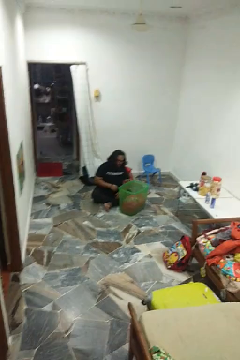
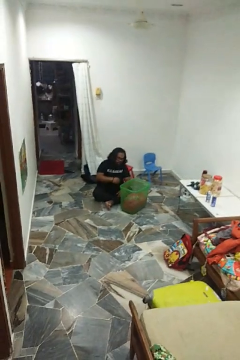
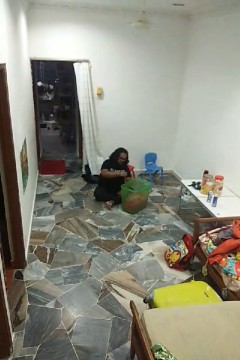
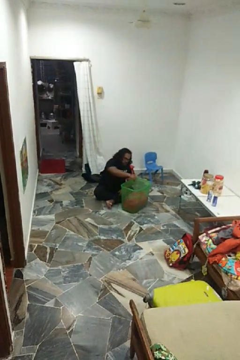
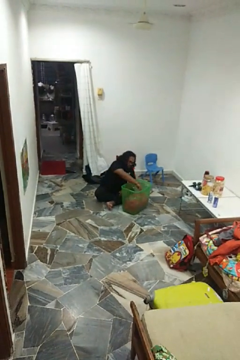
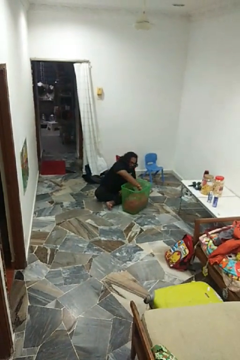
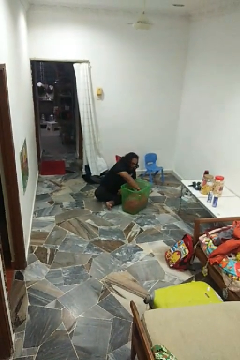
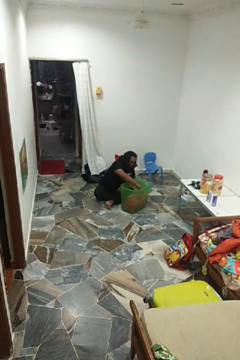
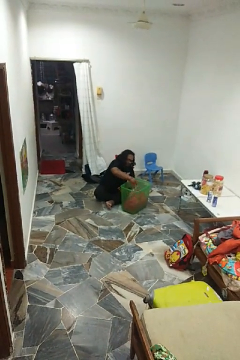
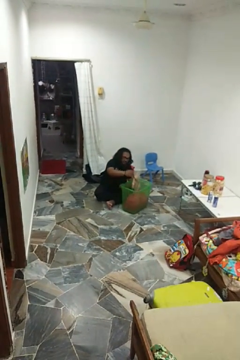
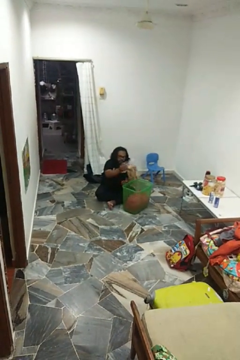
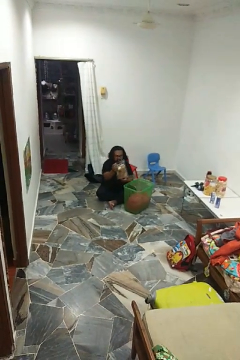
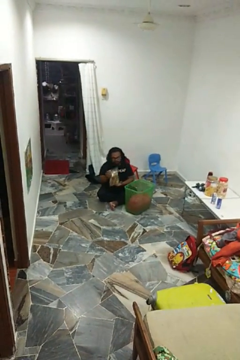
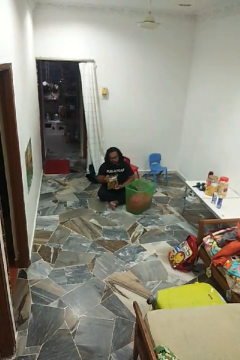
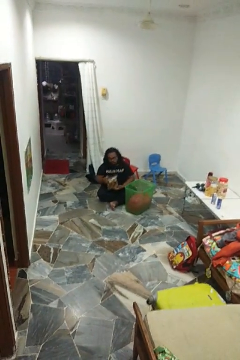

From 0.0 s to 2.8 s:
person takes object from basket

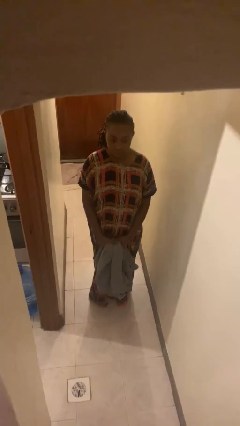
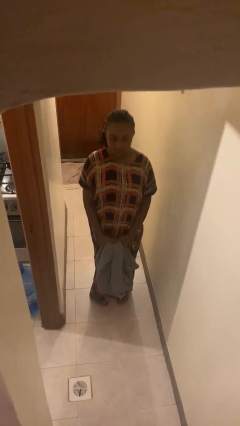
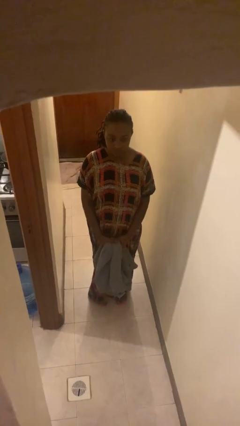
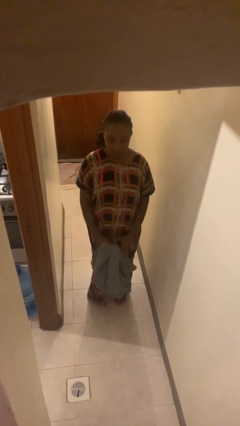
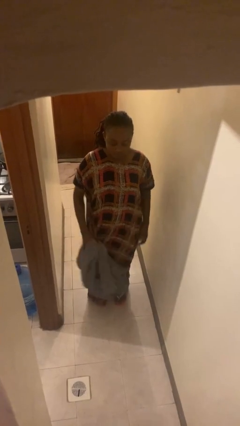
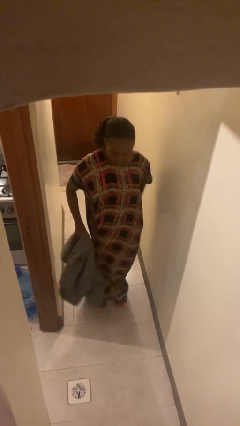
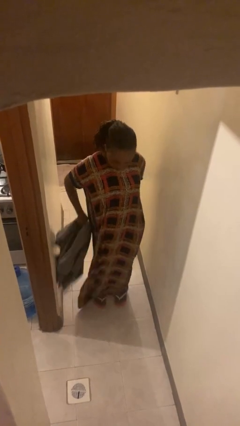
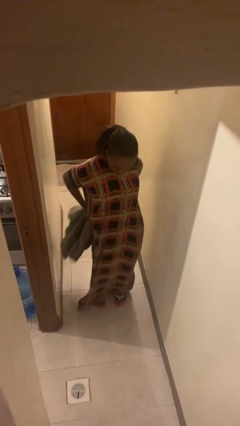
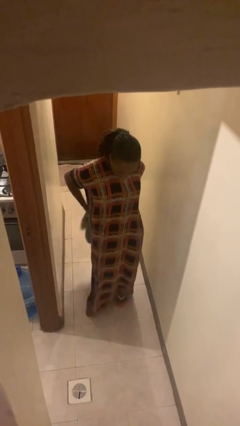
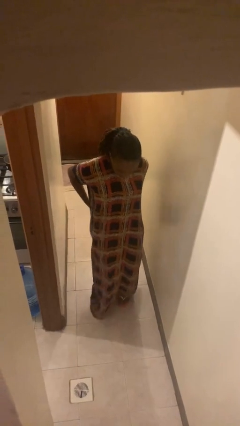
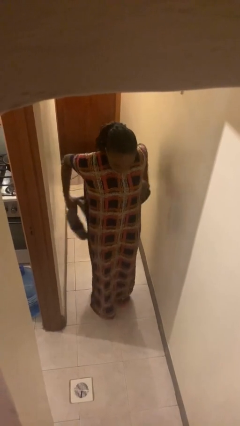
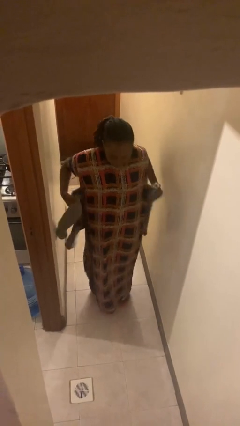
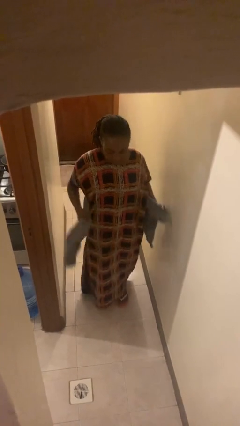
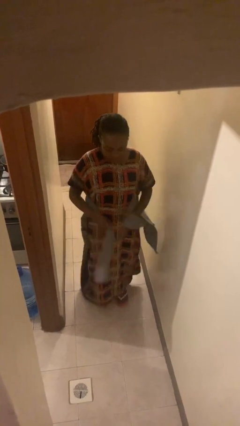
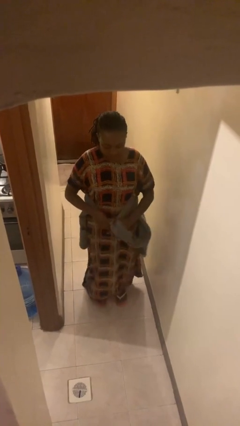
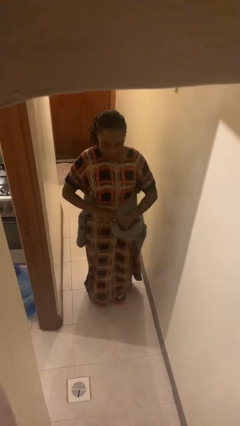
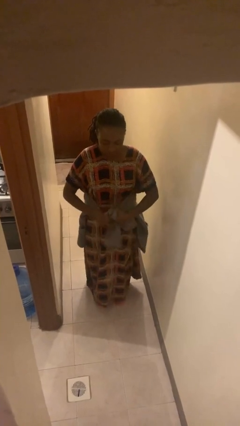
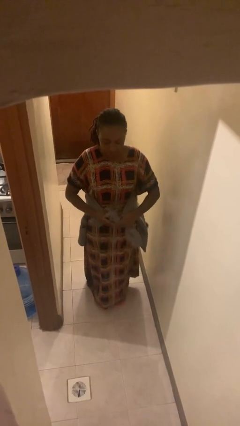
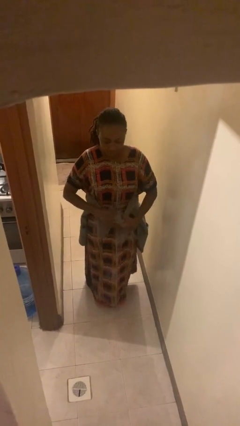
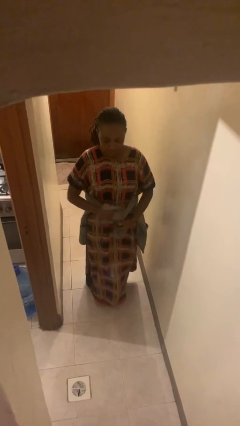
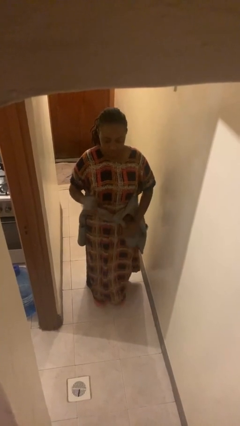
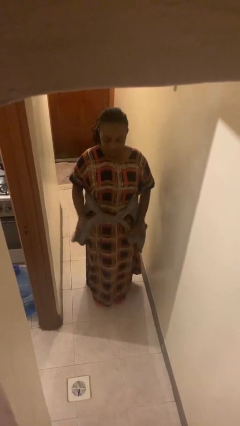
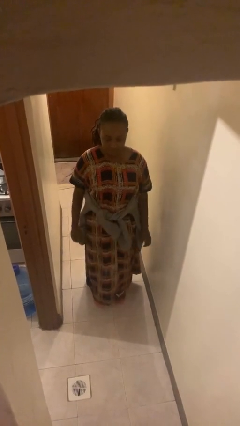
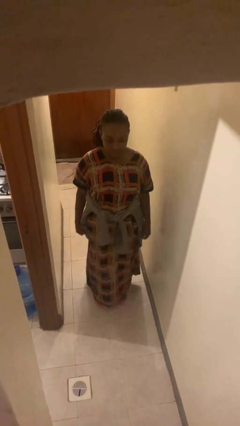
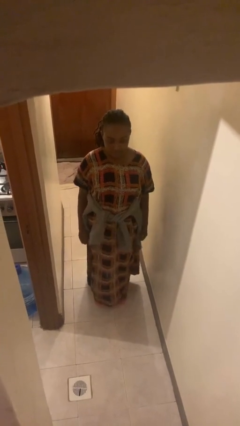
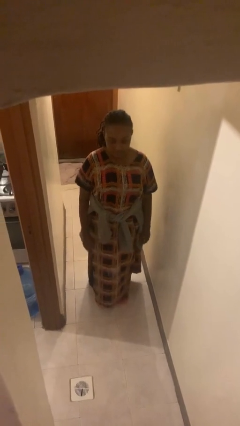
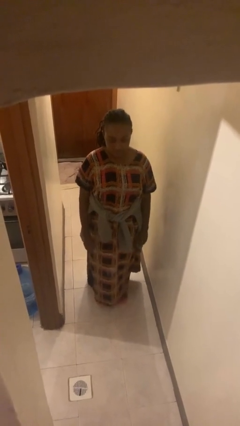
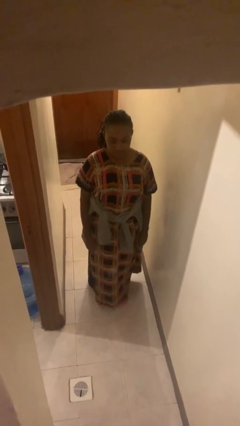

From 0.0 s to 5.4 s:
person ties jacket around waist

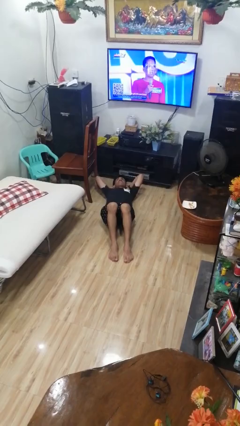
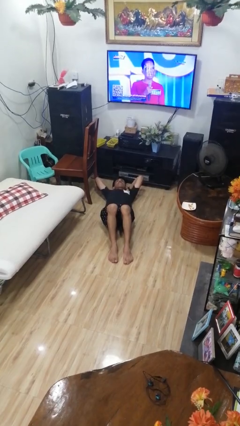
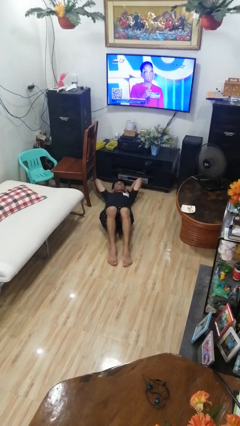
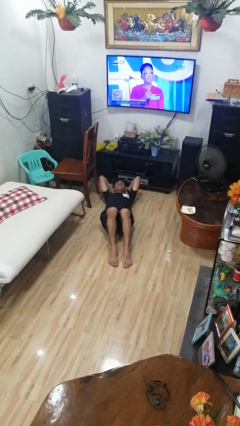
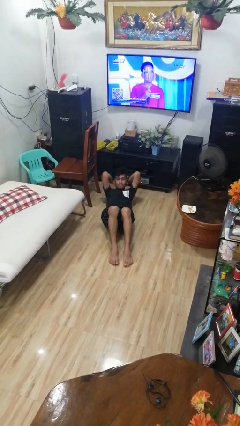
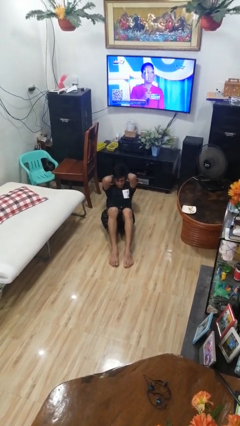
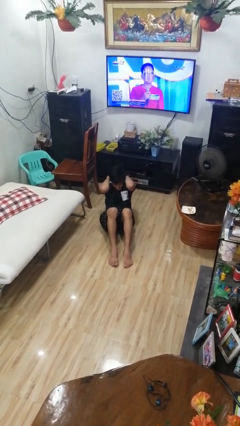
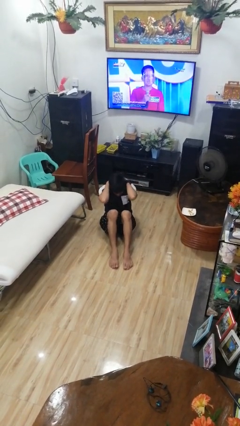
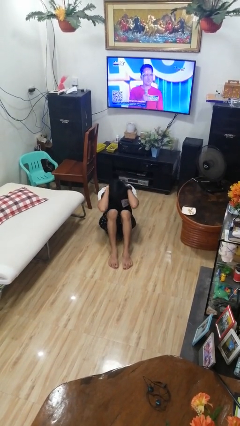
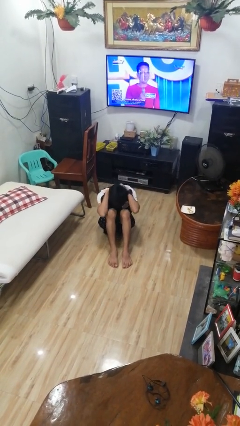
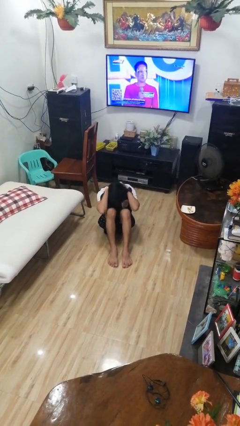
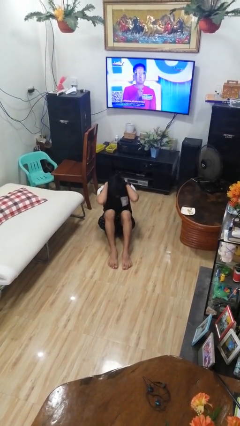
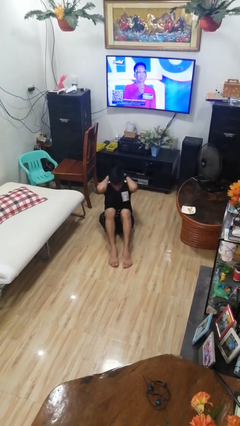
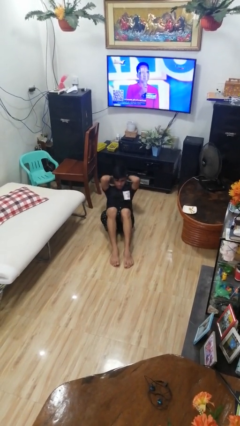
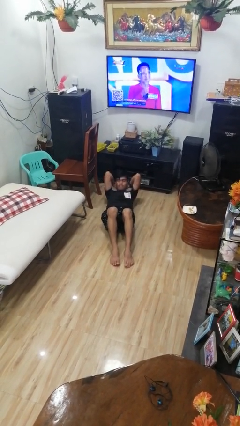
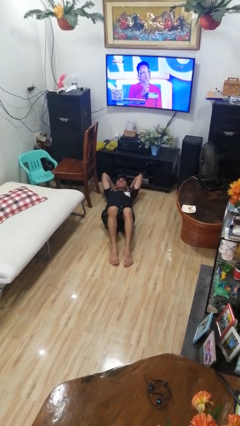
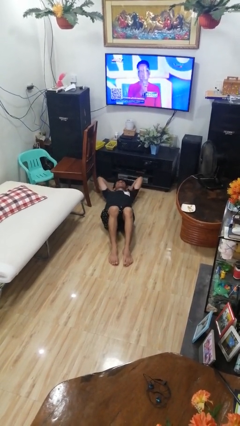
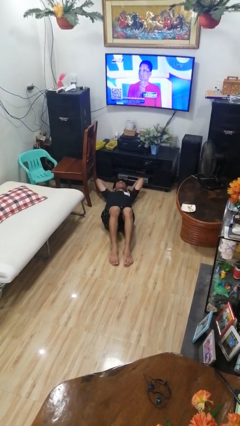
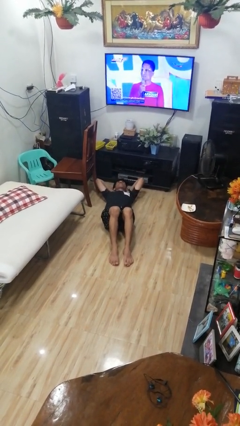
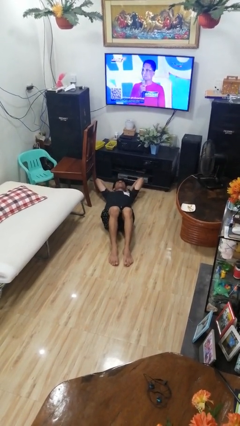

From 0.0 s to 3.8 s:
person exercises with situp

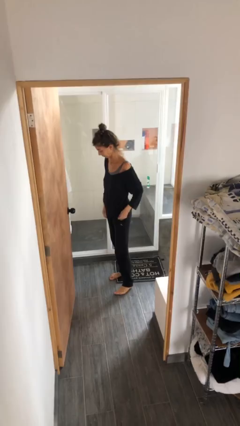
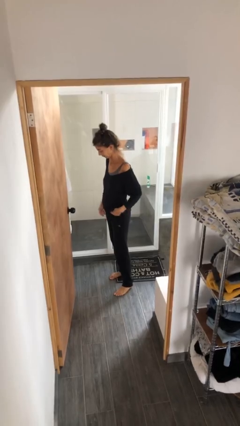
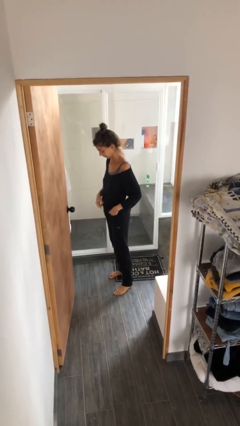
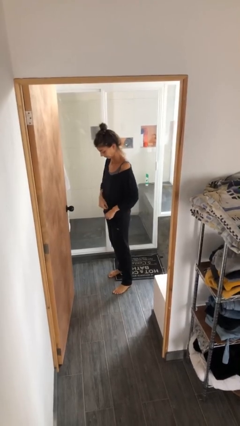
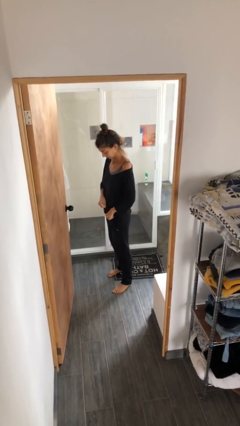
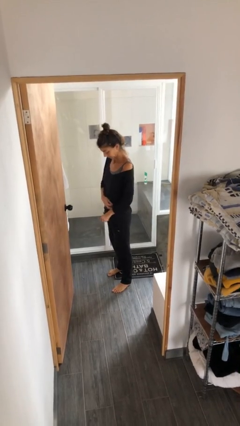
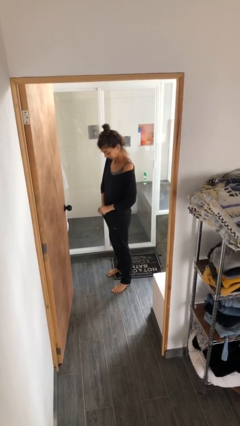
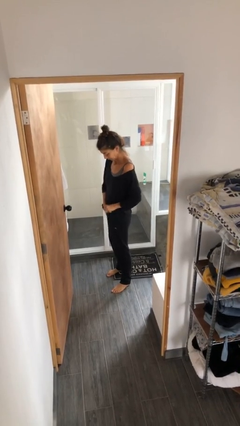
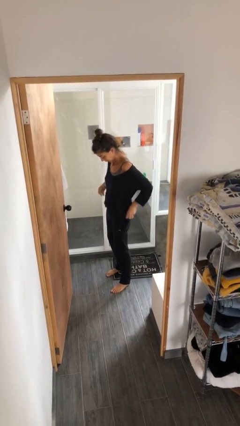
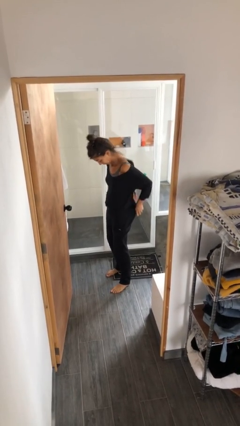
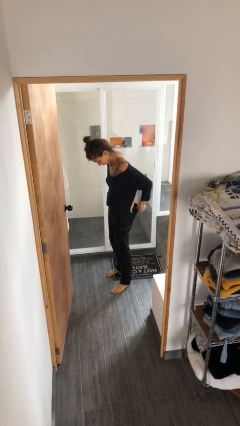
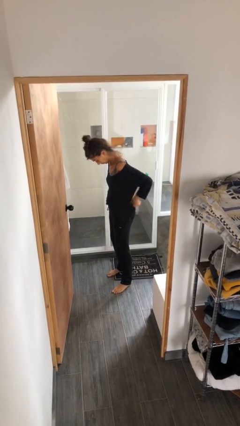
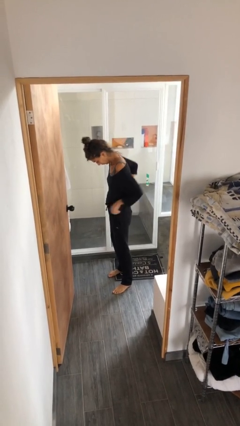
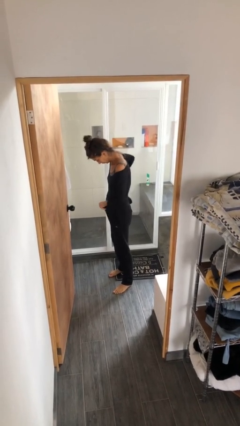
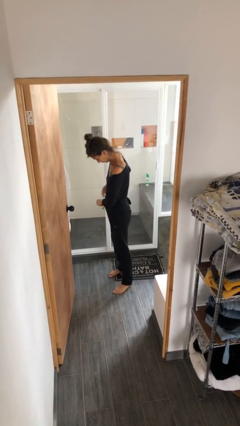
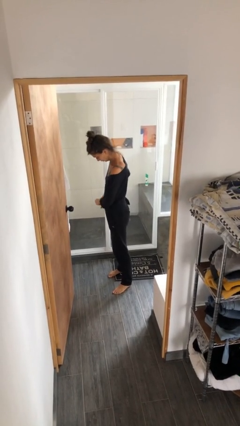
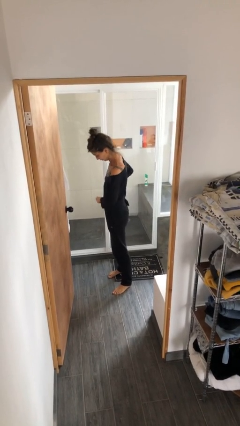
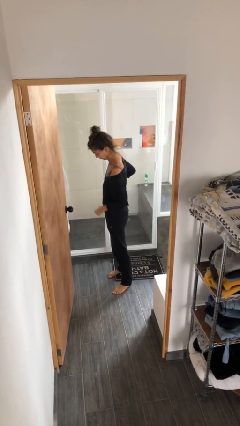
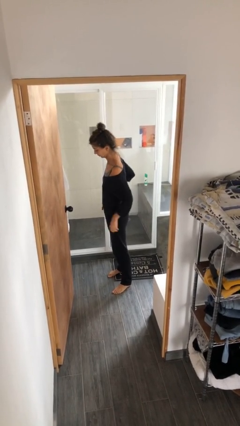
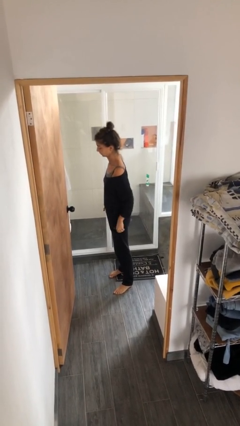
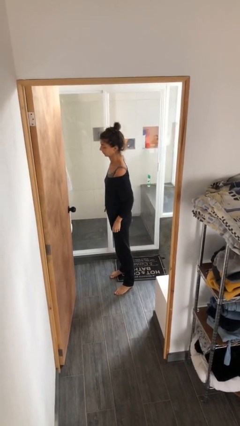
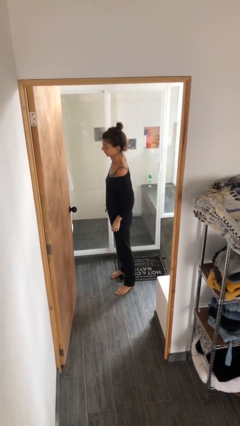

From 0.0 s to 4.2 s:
person tucks in shirt

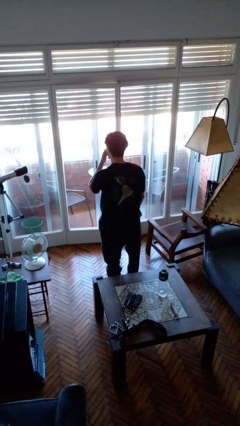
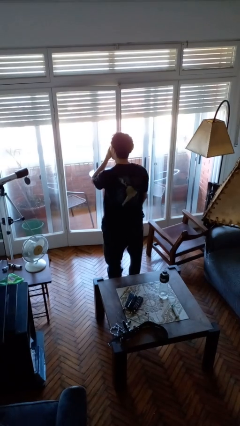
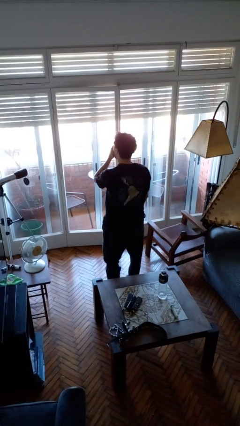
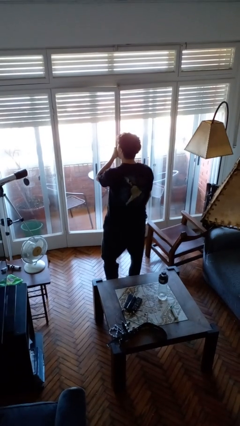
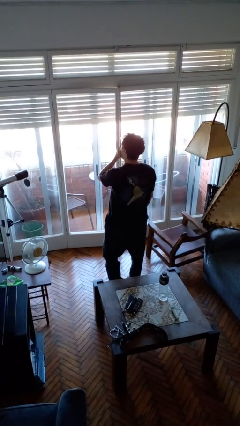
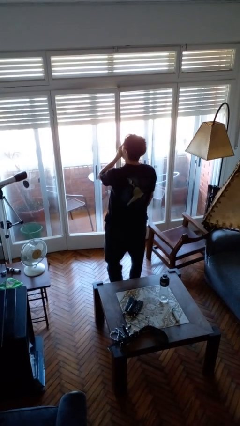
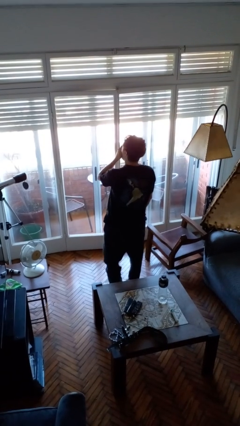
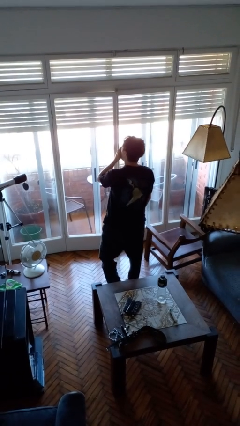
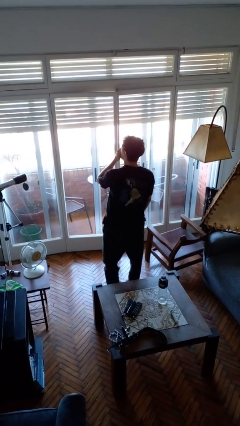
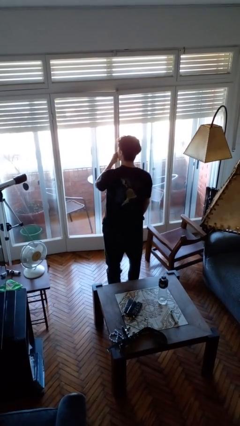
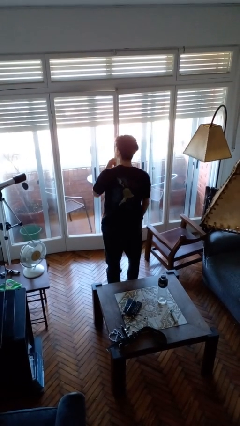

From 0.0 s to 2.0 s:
person yawns
